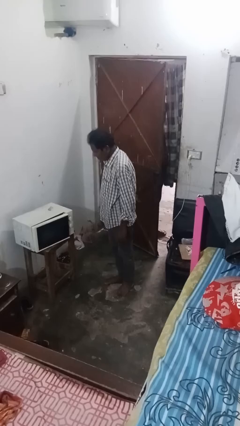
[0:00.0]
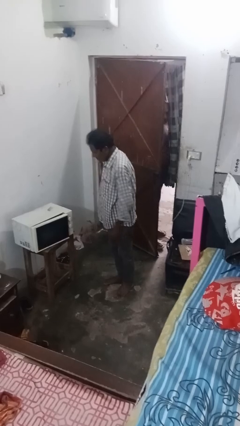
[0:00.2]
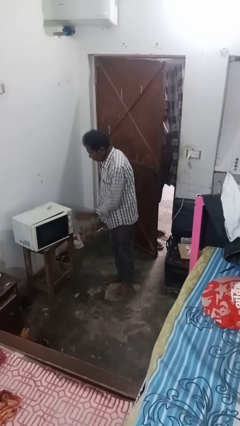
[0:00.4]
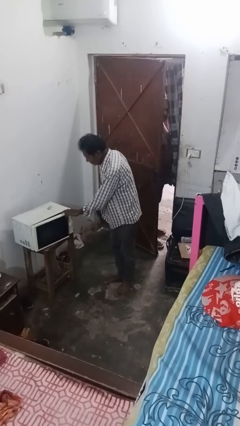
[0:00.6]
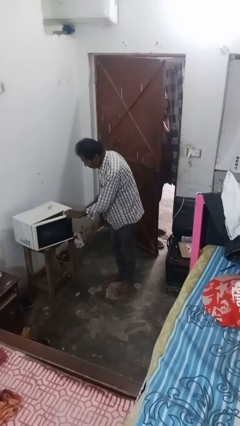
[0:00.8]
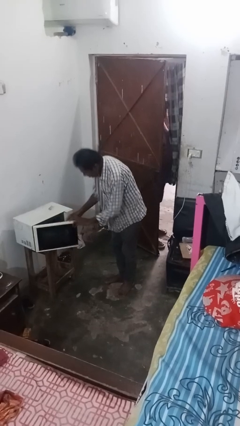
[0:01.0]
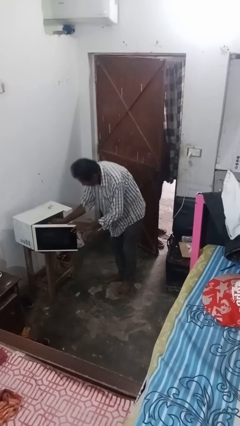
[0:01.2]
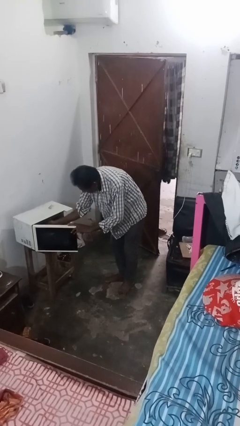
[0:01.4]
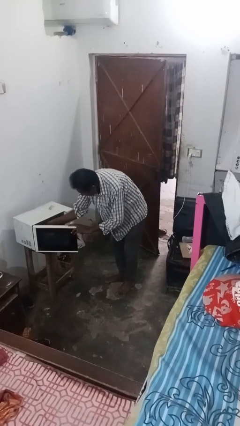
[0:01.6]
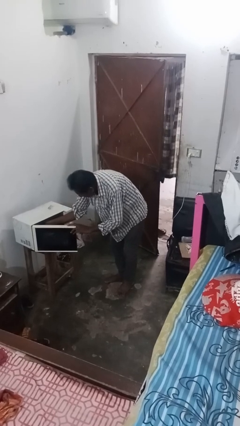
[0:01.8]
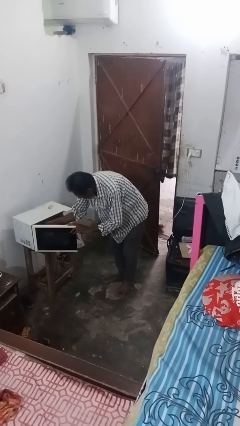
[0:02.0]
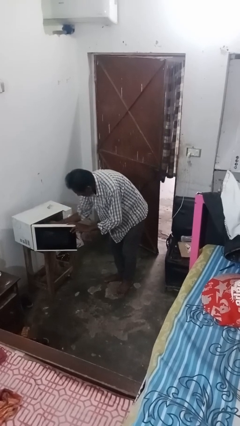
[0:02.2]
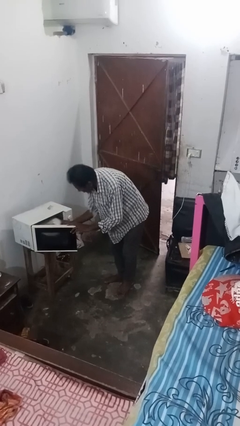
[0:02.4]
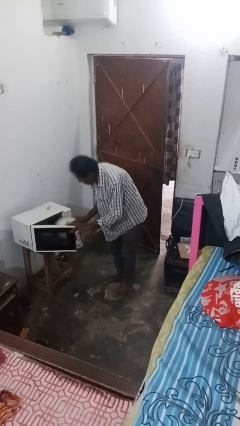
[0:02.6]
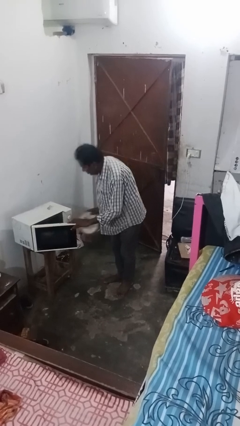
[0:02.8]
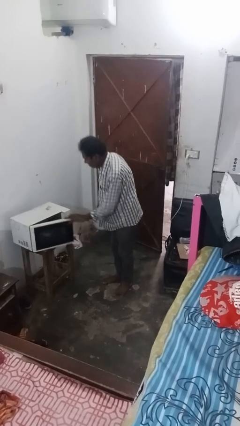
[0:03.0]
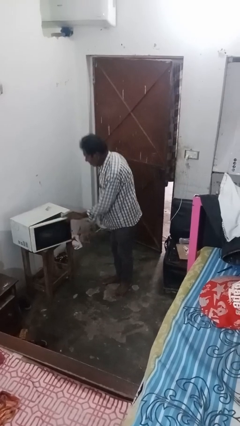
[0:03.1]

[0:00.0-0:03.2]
person takes object from microwave

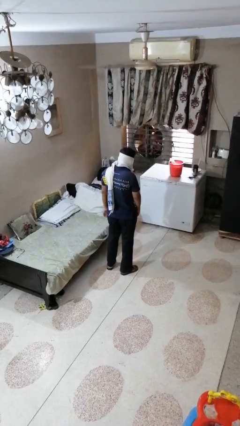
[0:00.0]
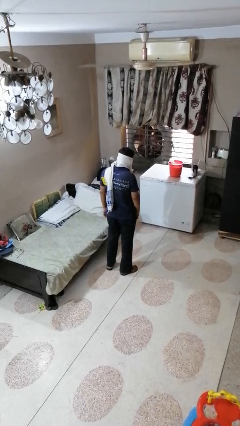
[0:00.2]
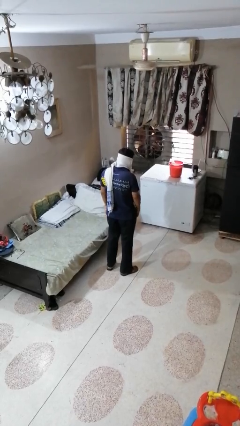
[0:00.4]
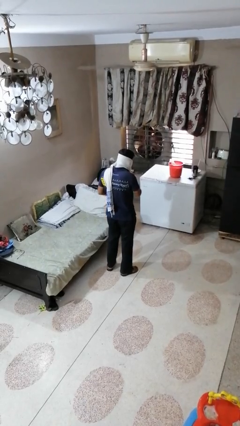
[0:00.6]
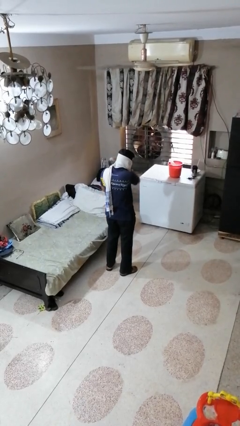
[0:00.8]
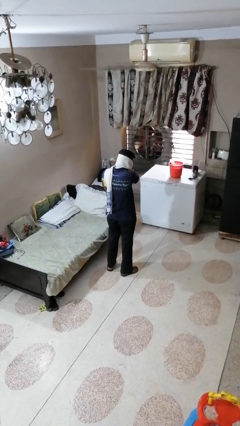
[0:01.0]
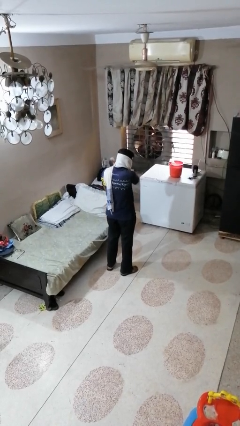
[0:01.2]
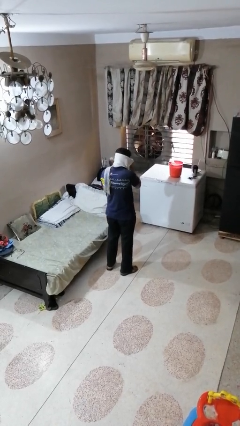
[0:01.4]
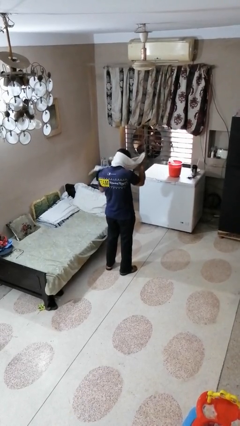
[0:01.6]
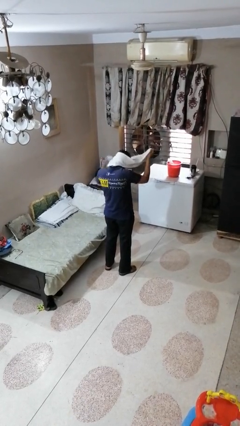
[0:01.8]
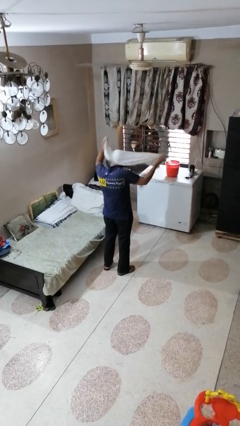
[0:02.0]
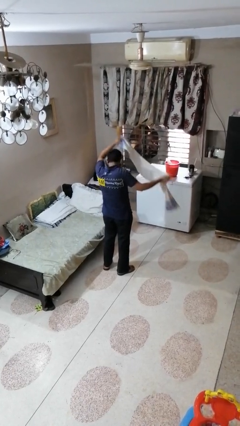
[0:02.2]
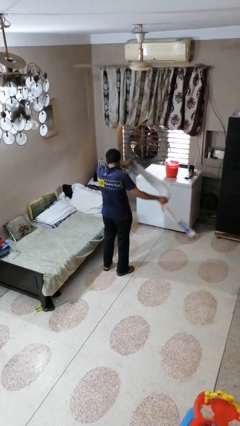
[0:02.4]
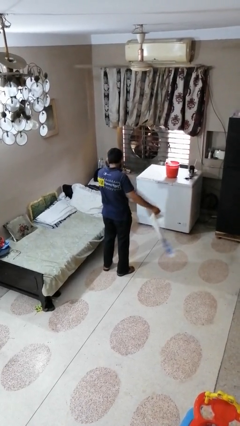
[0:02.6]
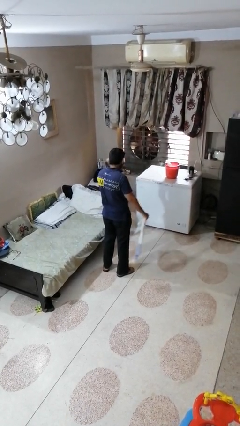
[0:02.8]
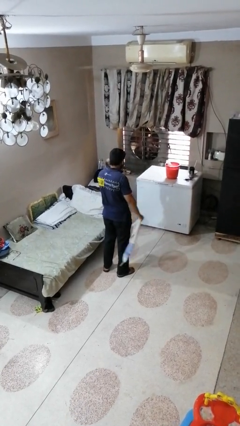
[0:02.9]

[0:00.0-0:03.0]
person takes off scarf

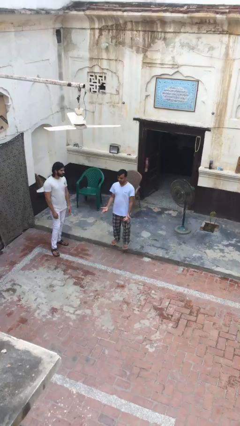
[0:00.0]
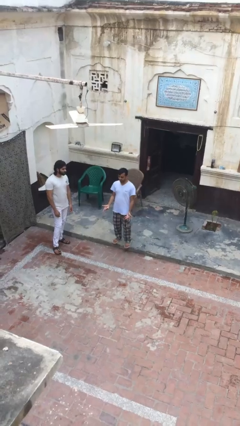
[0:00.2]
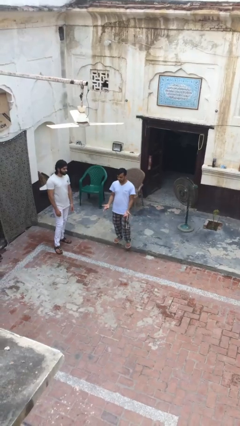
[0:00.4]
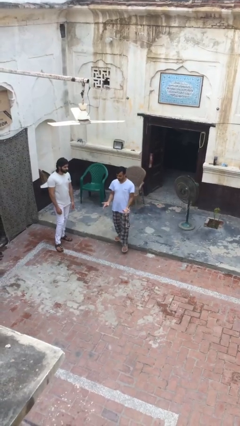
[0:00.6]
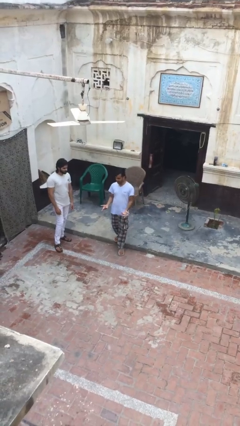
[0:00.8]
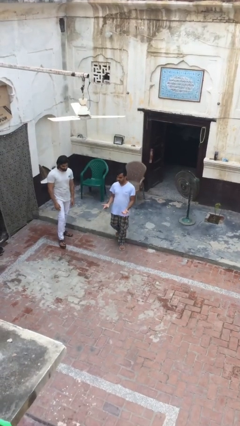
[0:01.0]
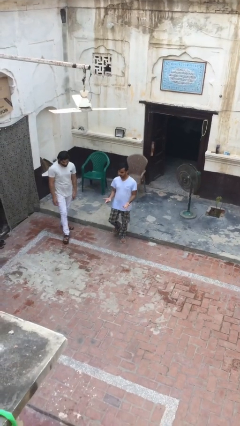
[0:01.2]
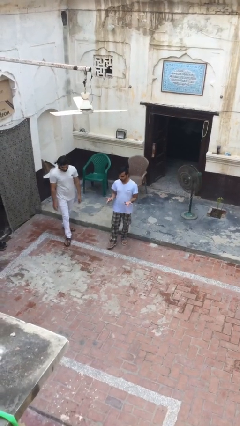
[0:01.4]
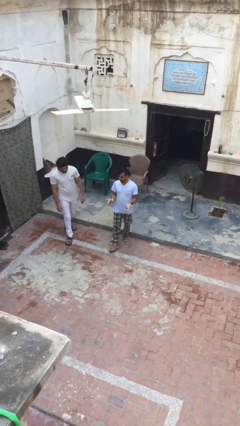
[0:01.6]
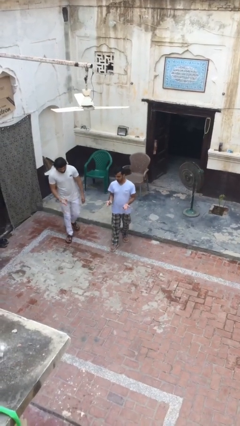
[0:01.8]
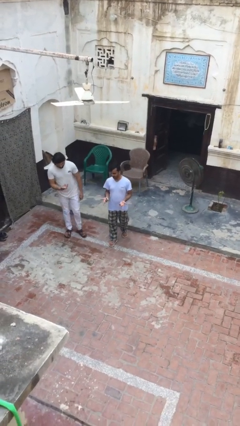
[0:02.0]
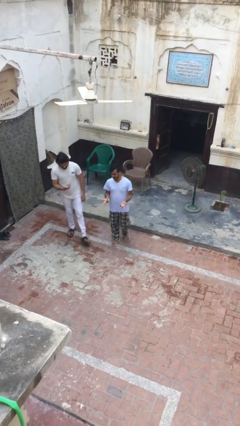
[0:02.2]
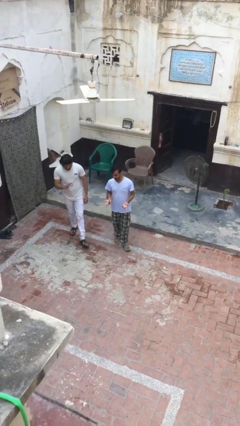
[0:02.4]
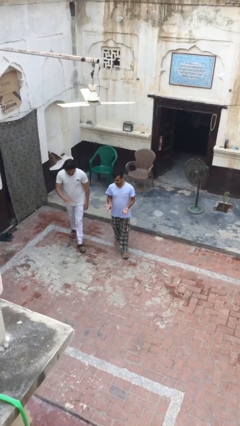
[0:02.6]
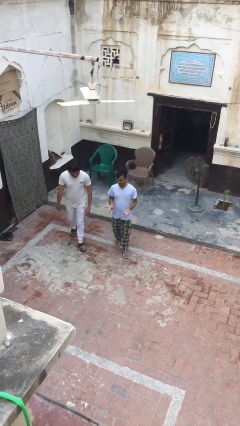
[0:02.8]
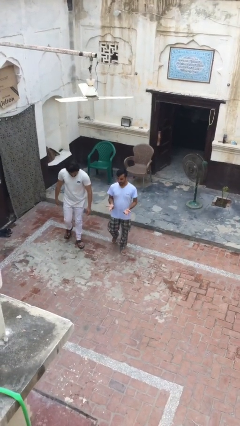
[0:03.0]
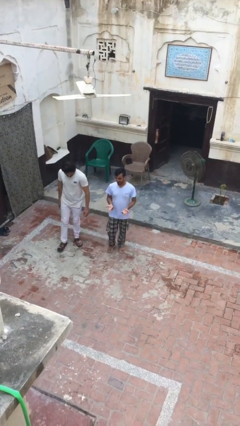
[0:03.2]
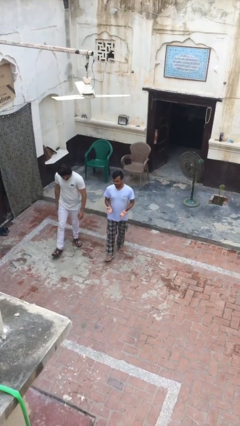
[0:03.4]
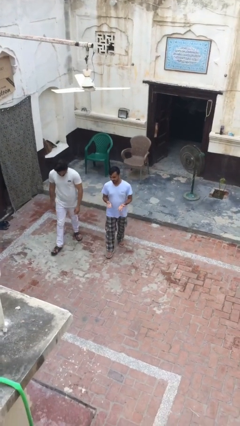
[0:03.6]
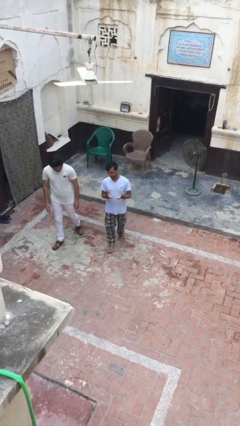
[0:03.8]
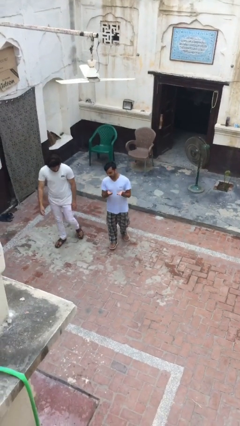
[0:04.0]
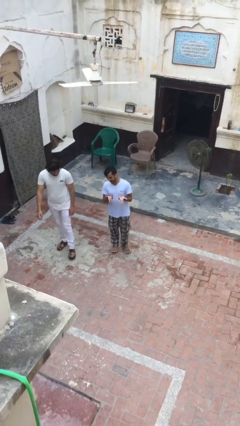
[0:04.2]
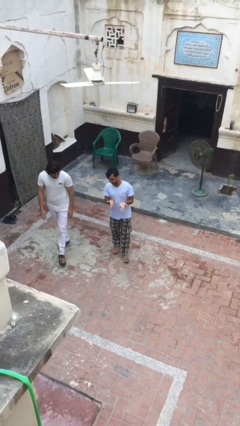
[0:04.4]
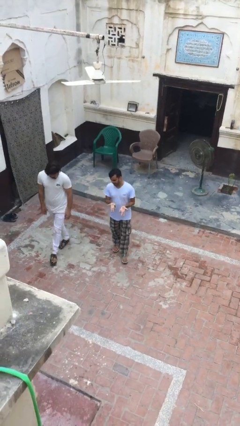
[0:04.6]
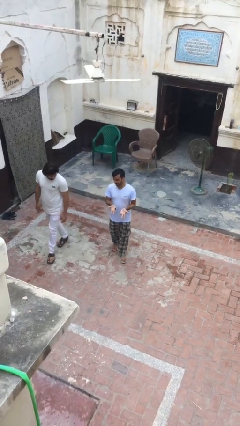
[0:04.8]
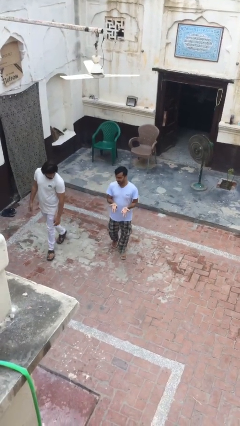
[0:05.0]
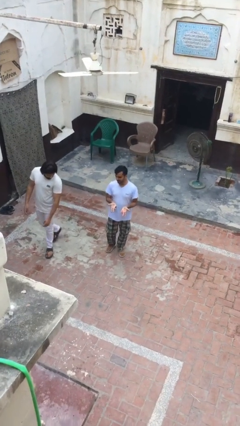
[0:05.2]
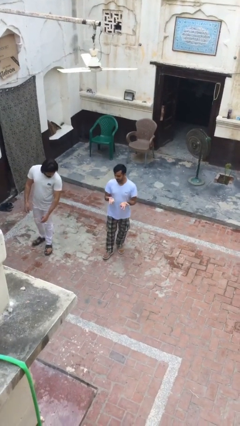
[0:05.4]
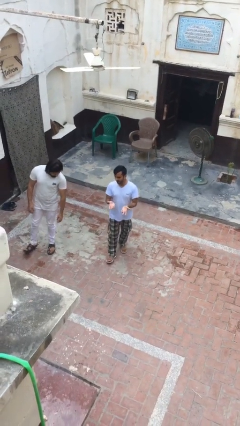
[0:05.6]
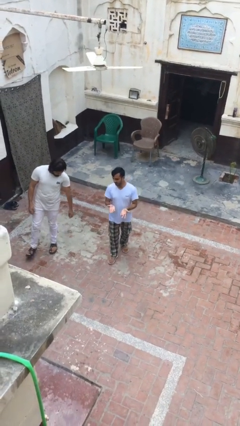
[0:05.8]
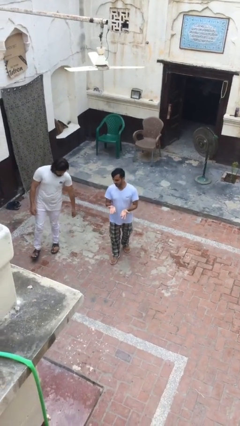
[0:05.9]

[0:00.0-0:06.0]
person talks to person

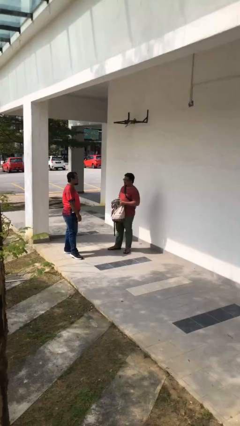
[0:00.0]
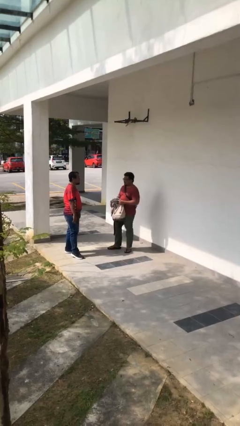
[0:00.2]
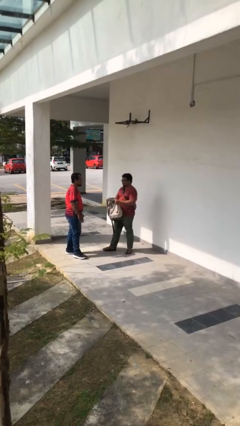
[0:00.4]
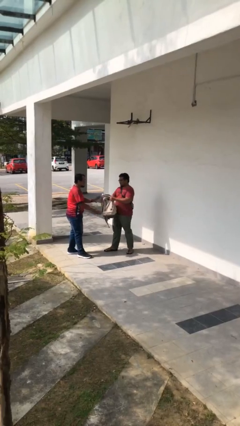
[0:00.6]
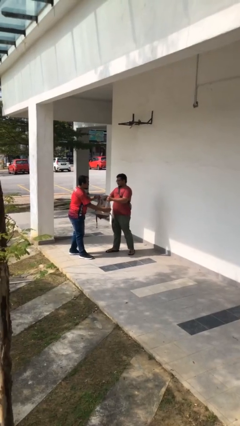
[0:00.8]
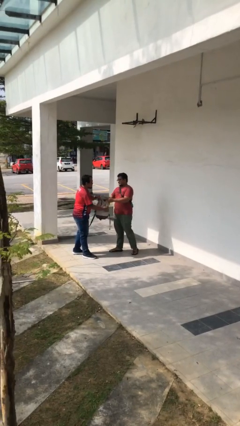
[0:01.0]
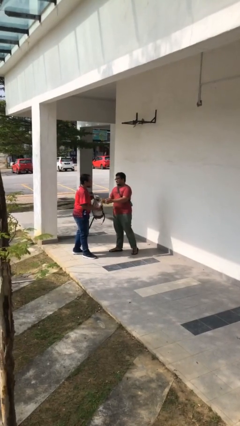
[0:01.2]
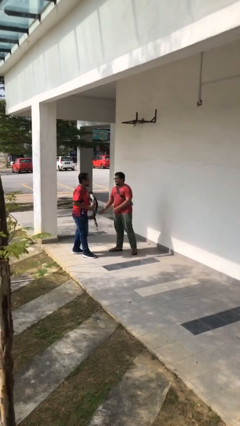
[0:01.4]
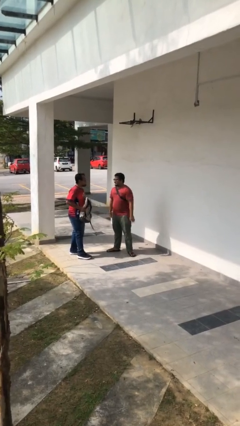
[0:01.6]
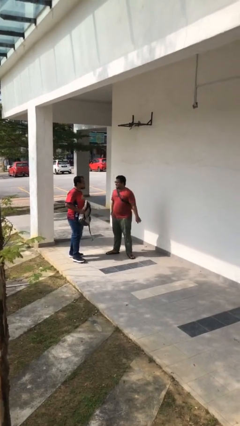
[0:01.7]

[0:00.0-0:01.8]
person transfers object to person

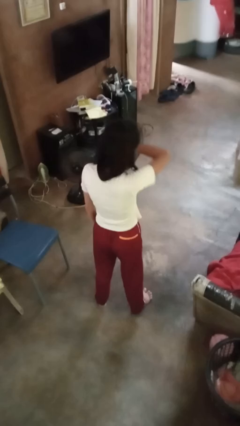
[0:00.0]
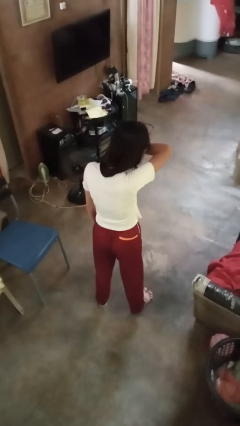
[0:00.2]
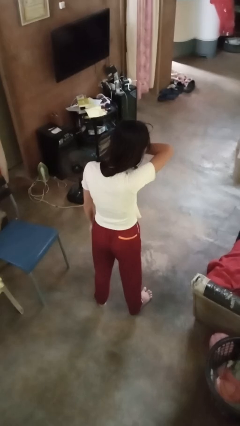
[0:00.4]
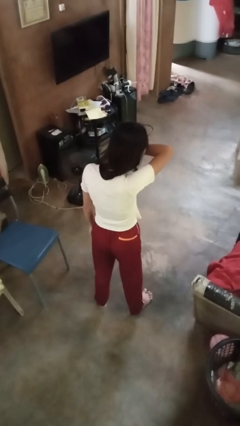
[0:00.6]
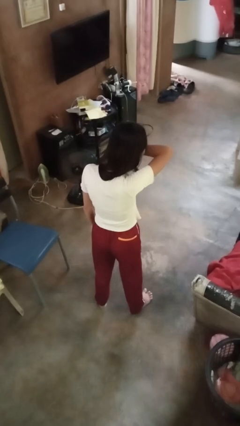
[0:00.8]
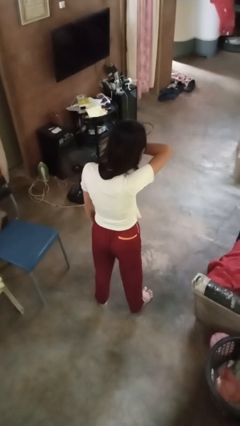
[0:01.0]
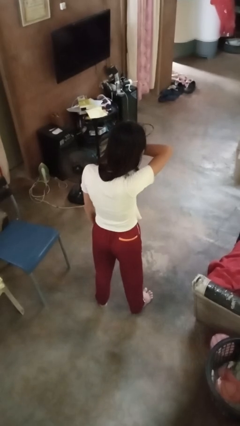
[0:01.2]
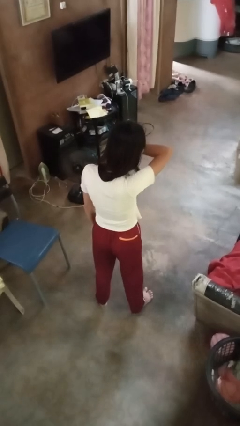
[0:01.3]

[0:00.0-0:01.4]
person sneezes into arm

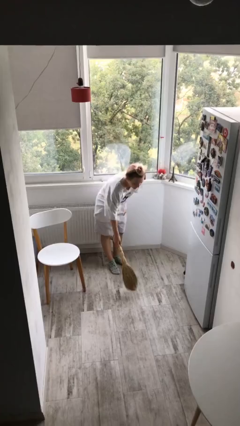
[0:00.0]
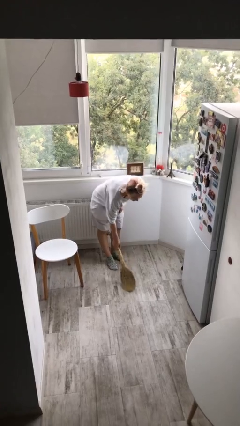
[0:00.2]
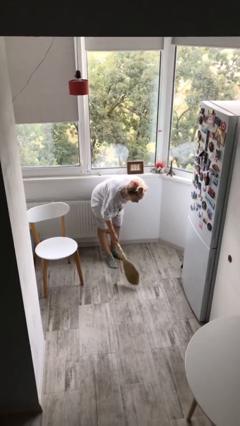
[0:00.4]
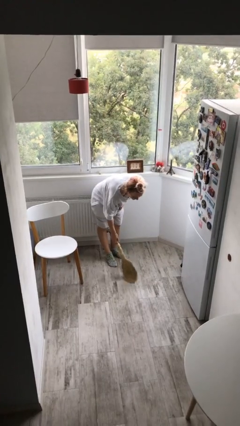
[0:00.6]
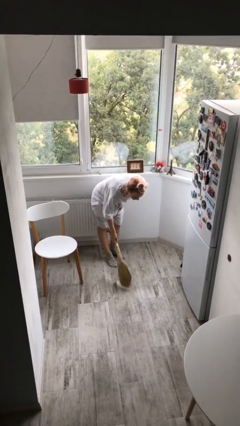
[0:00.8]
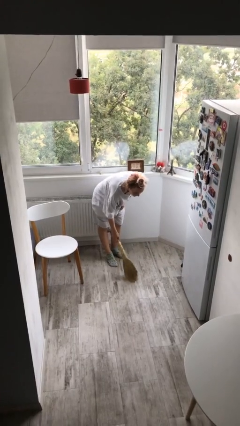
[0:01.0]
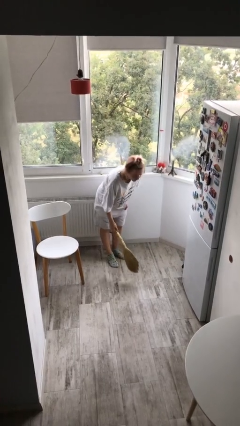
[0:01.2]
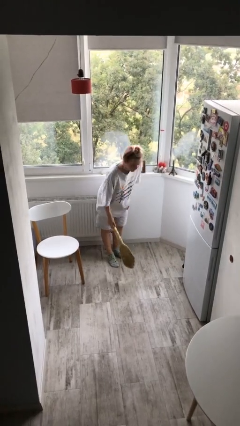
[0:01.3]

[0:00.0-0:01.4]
person sweeps floor

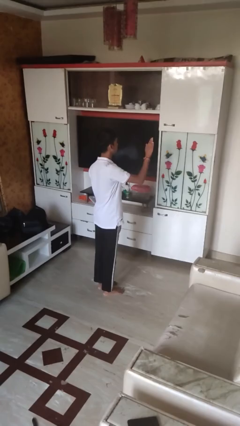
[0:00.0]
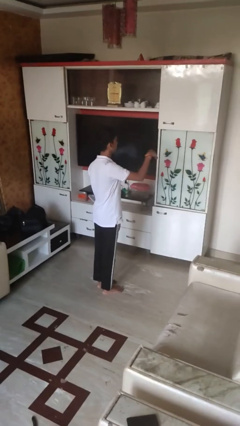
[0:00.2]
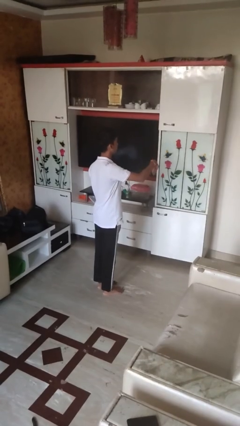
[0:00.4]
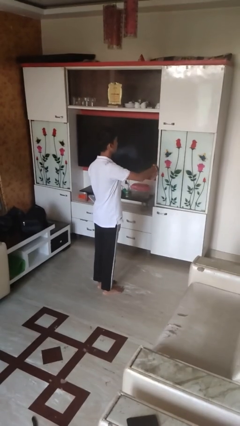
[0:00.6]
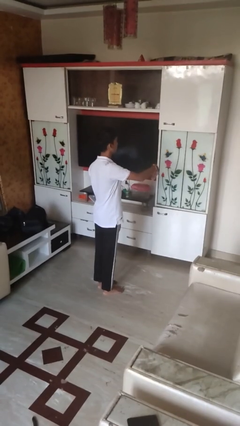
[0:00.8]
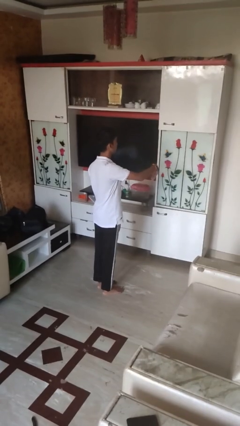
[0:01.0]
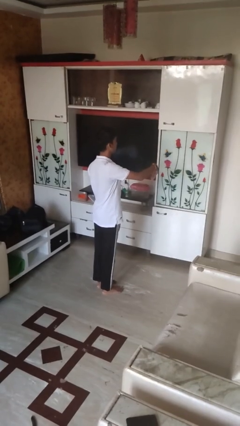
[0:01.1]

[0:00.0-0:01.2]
person gestures swipe down
